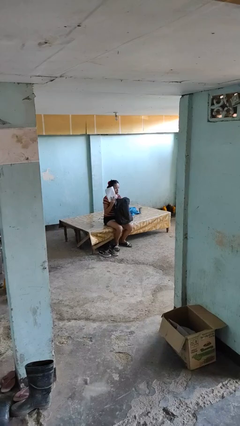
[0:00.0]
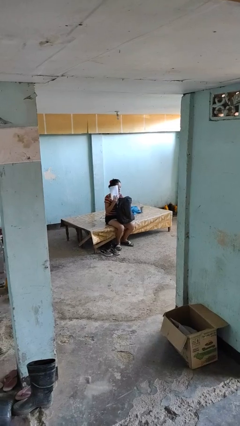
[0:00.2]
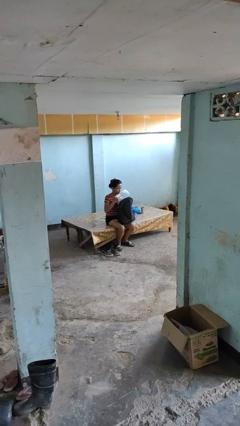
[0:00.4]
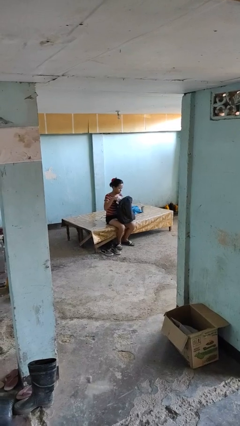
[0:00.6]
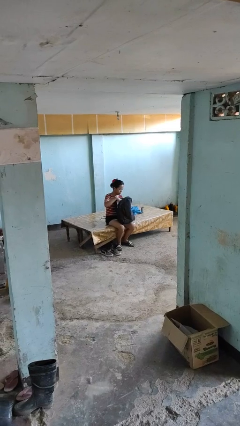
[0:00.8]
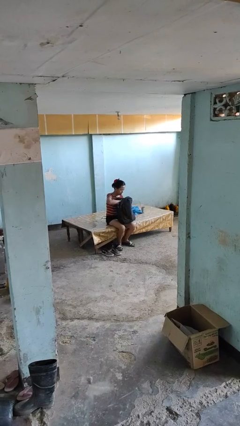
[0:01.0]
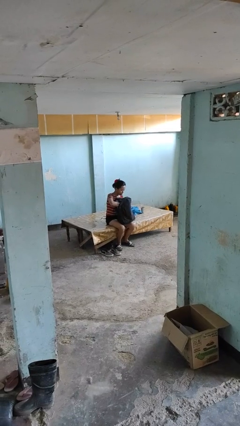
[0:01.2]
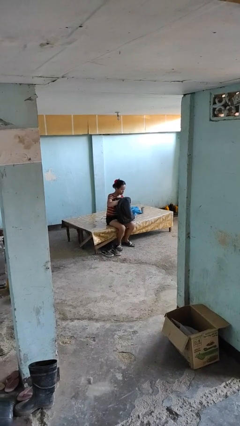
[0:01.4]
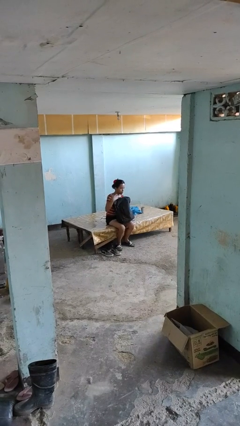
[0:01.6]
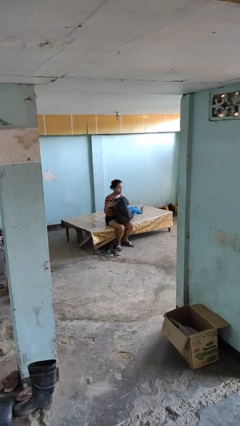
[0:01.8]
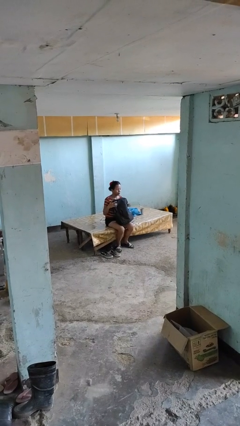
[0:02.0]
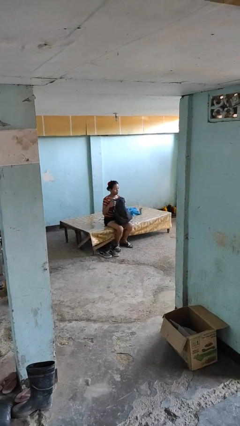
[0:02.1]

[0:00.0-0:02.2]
person puts object into backpack

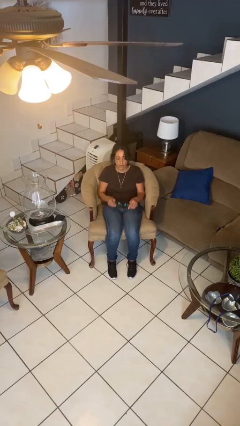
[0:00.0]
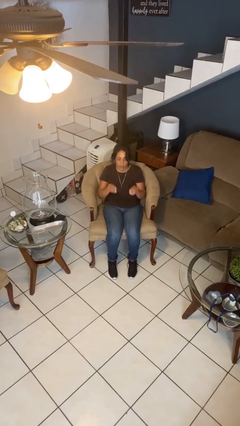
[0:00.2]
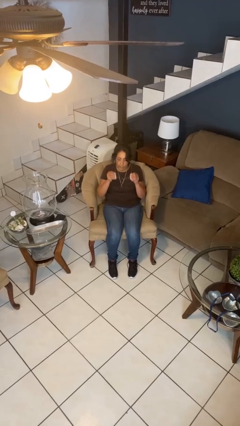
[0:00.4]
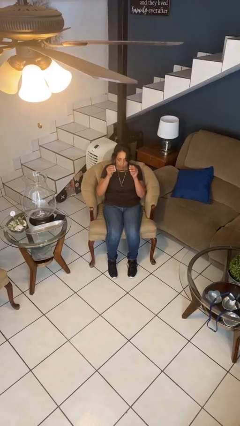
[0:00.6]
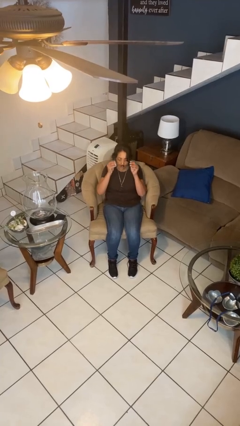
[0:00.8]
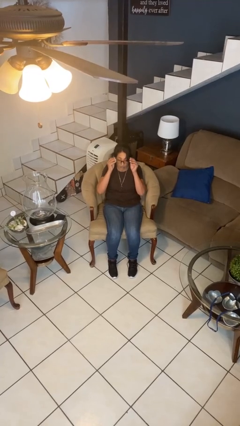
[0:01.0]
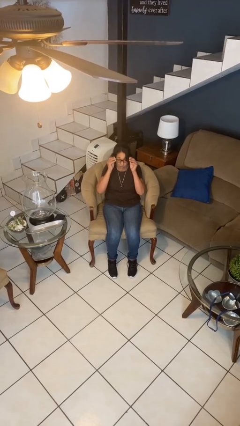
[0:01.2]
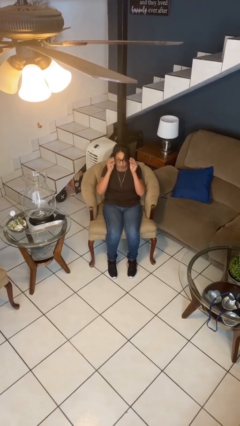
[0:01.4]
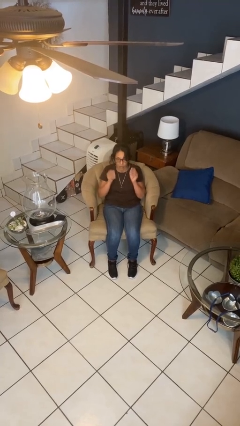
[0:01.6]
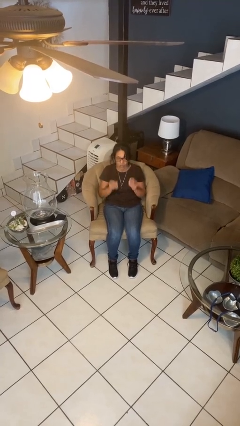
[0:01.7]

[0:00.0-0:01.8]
person puts on glasses

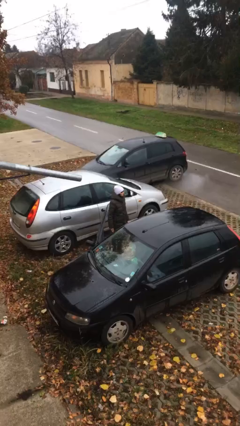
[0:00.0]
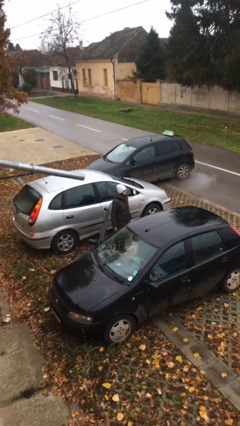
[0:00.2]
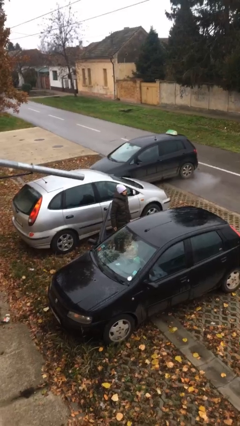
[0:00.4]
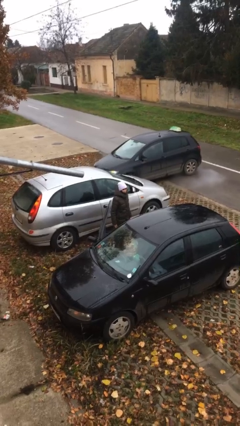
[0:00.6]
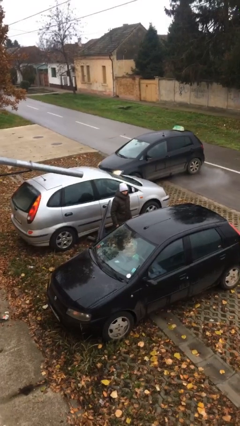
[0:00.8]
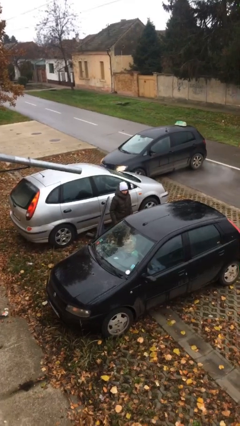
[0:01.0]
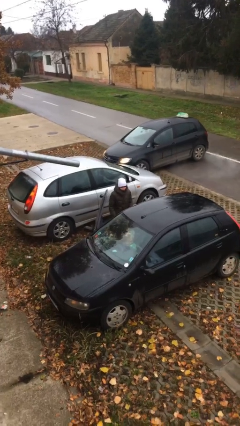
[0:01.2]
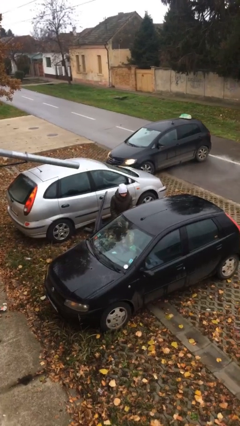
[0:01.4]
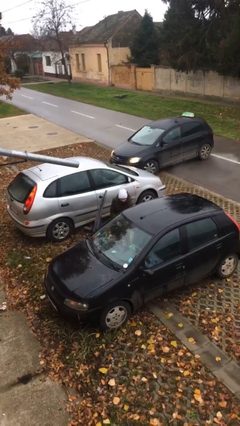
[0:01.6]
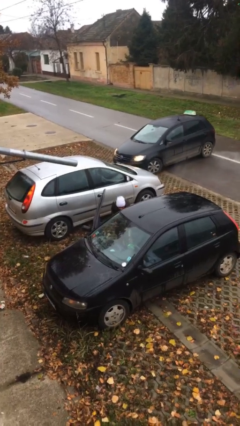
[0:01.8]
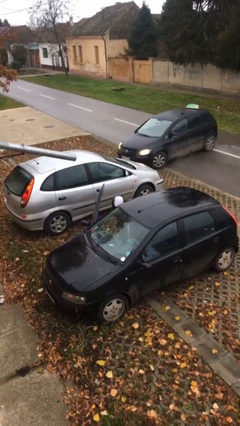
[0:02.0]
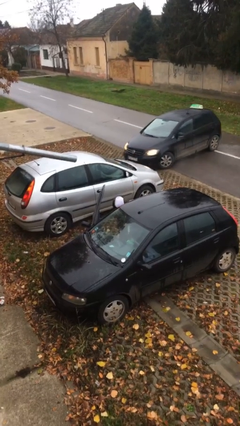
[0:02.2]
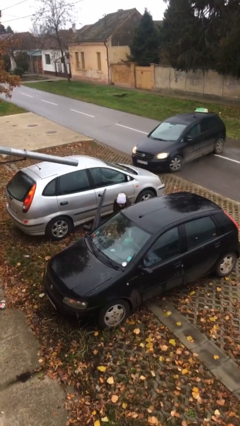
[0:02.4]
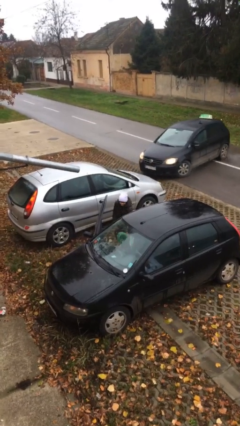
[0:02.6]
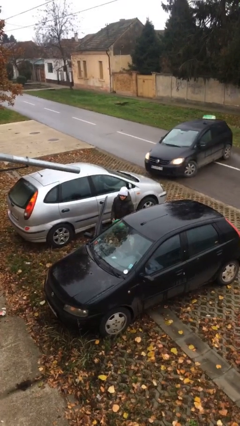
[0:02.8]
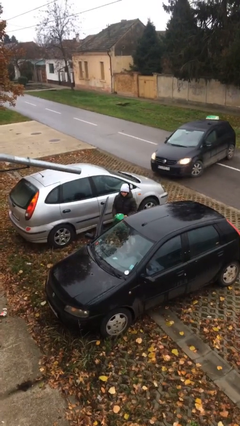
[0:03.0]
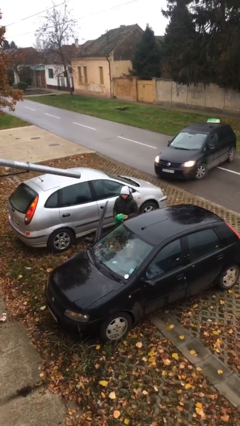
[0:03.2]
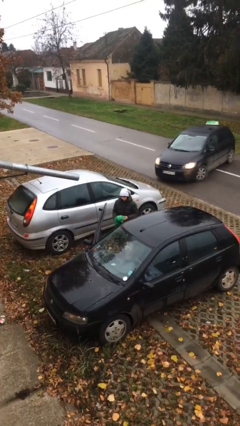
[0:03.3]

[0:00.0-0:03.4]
person unloads car

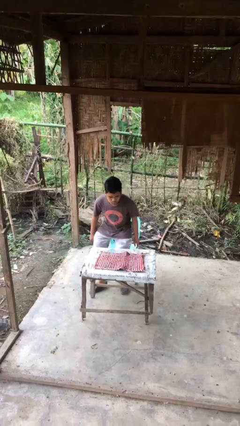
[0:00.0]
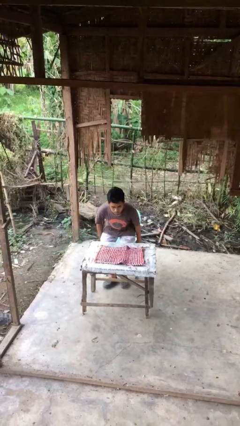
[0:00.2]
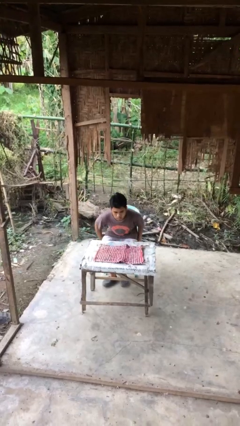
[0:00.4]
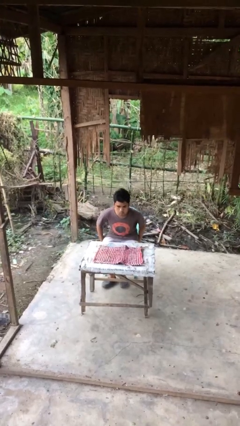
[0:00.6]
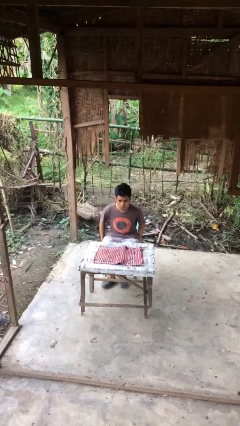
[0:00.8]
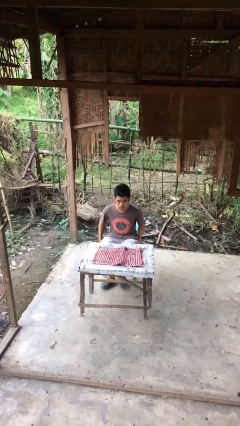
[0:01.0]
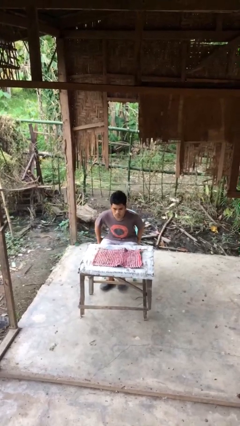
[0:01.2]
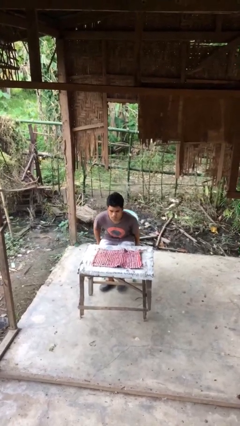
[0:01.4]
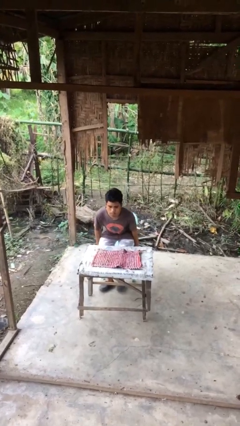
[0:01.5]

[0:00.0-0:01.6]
person sits down

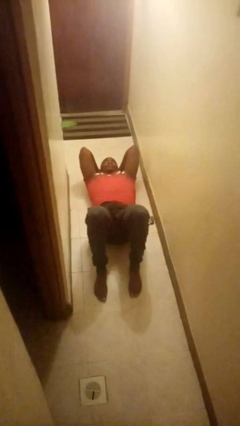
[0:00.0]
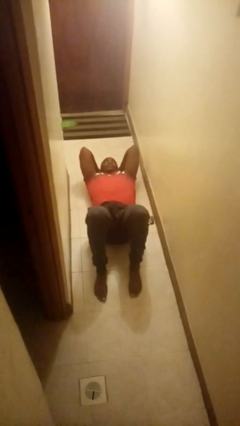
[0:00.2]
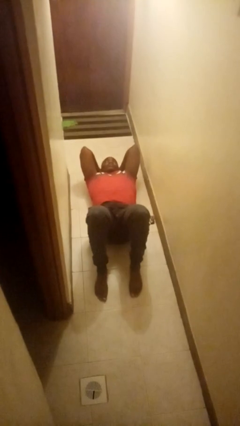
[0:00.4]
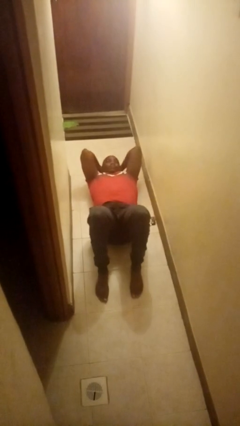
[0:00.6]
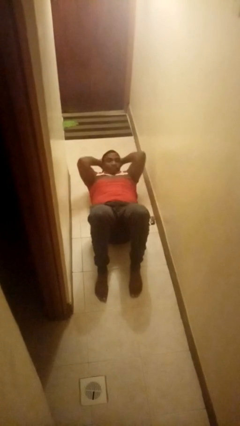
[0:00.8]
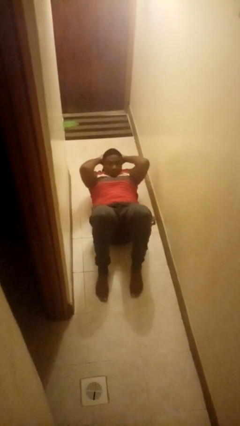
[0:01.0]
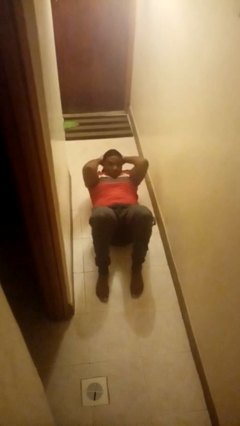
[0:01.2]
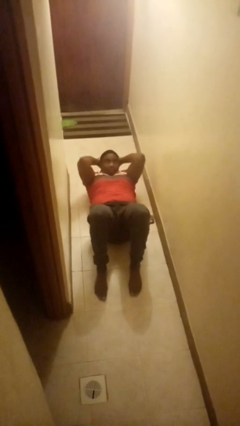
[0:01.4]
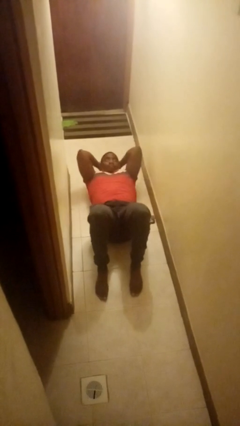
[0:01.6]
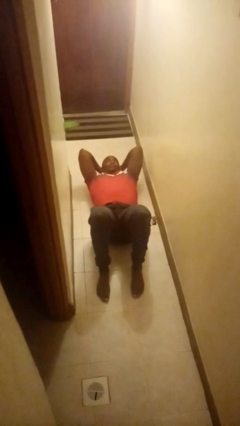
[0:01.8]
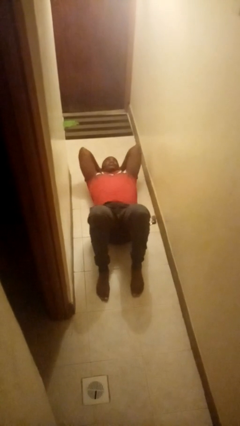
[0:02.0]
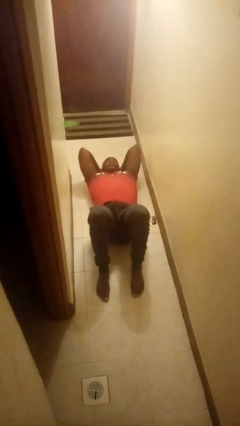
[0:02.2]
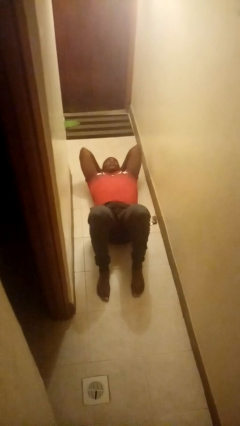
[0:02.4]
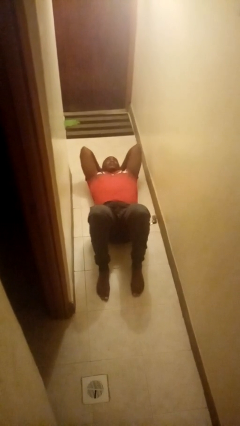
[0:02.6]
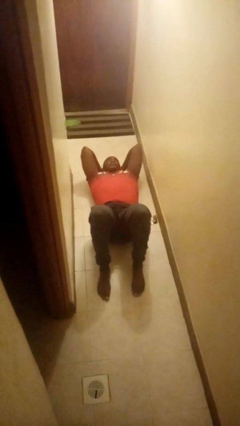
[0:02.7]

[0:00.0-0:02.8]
person exercises with situp

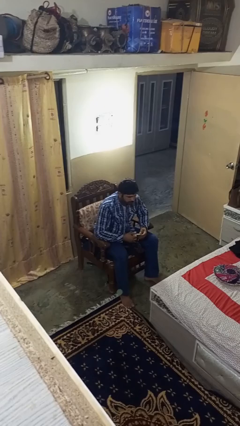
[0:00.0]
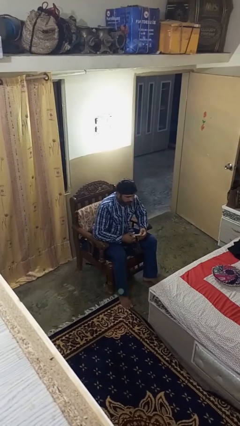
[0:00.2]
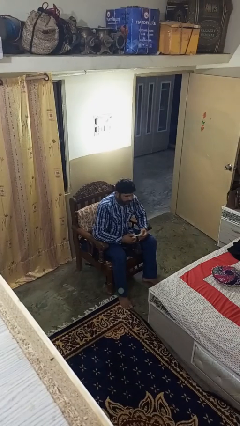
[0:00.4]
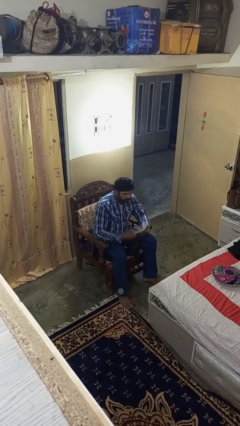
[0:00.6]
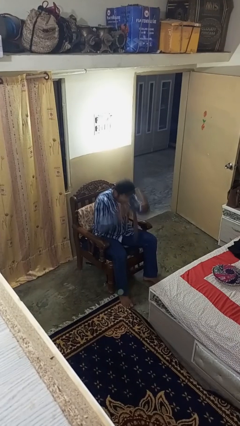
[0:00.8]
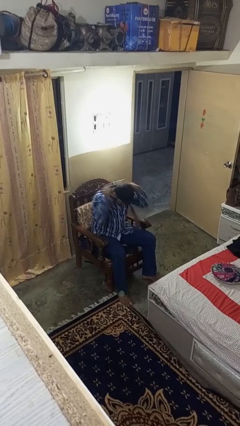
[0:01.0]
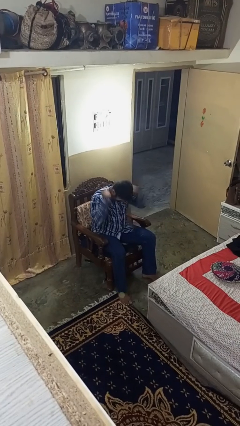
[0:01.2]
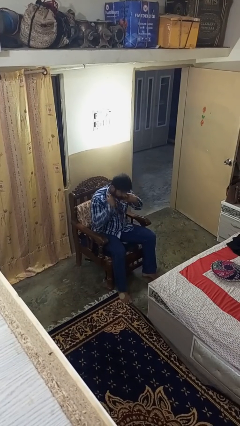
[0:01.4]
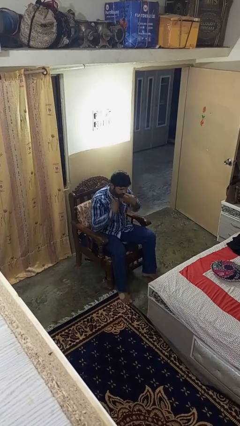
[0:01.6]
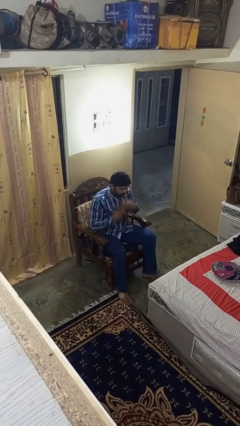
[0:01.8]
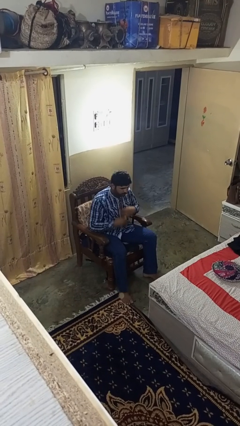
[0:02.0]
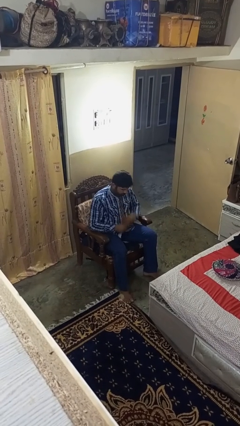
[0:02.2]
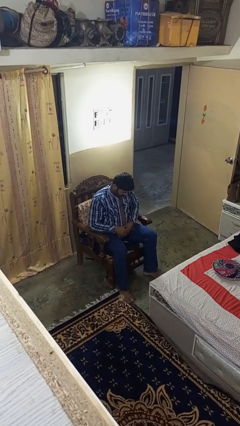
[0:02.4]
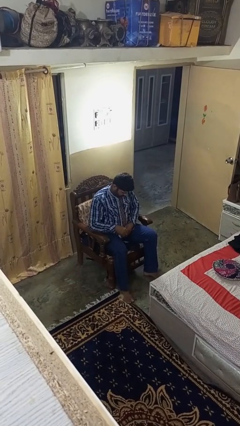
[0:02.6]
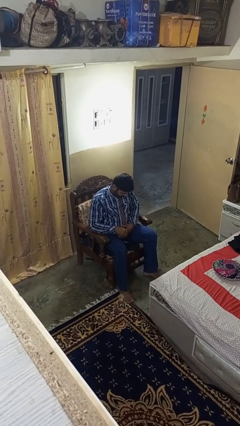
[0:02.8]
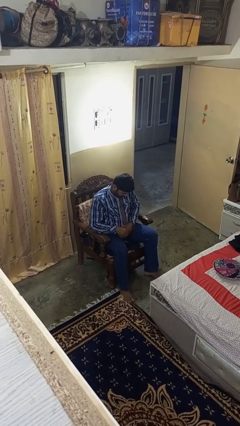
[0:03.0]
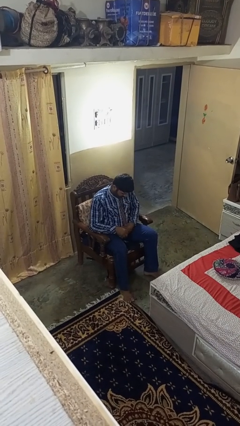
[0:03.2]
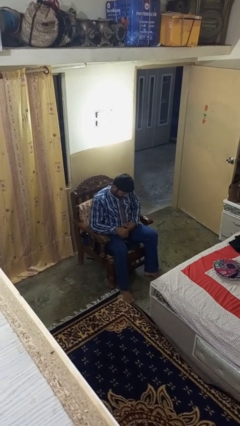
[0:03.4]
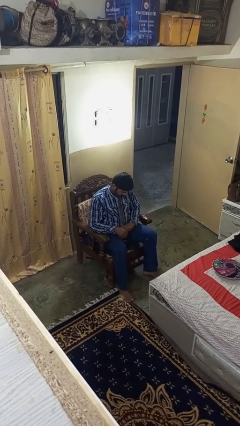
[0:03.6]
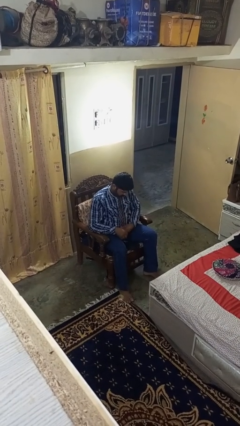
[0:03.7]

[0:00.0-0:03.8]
person puts on necktie

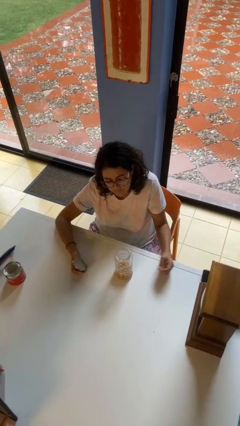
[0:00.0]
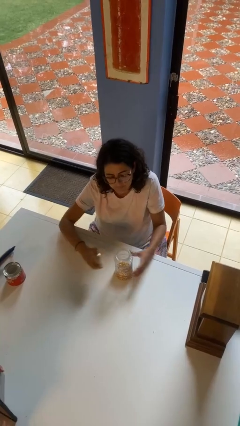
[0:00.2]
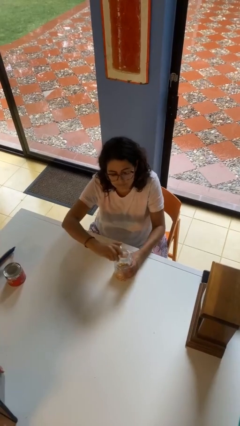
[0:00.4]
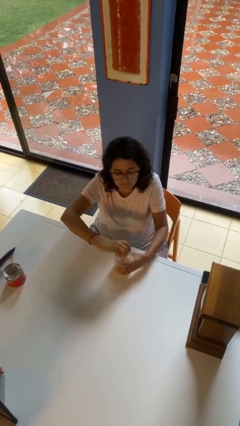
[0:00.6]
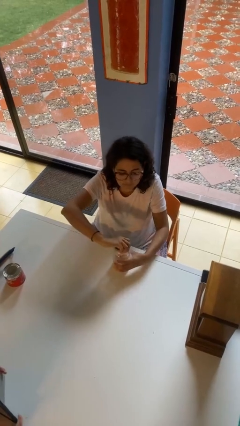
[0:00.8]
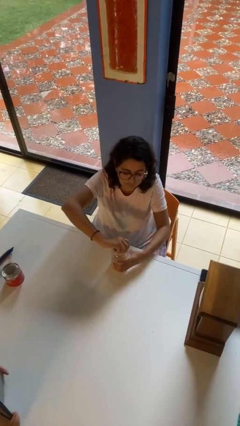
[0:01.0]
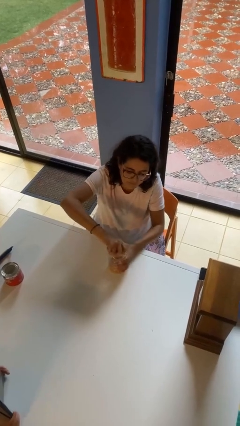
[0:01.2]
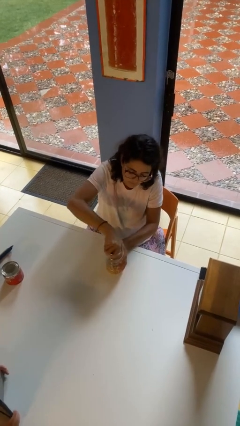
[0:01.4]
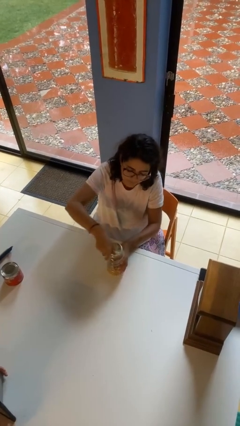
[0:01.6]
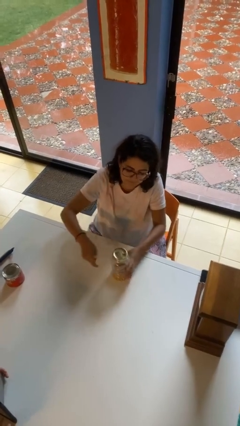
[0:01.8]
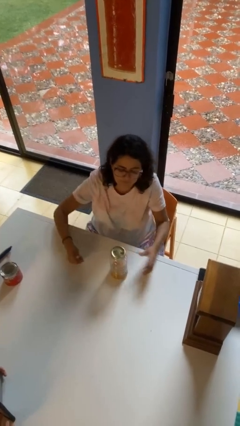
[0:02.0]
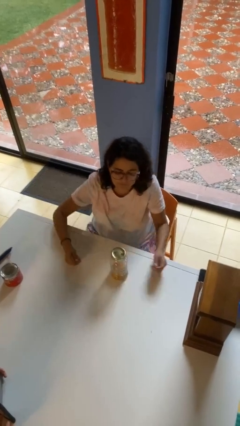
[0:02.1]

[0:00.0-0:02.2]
person closes jar
